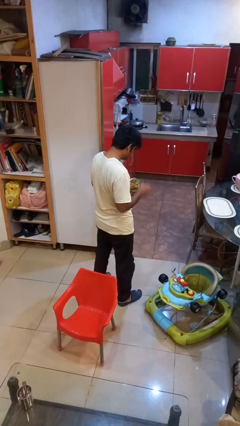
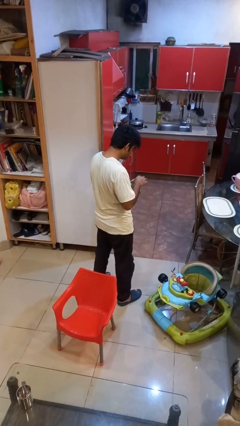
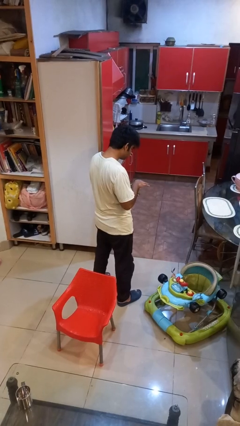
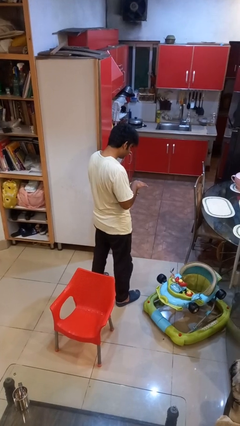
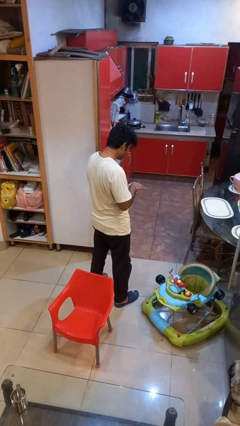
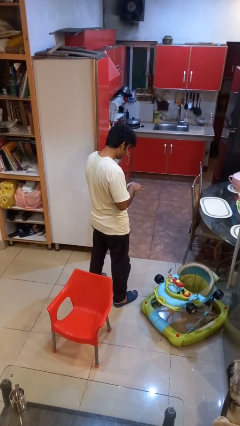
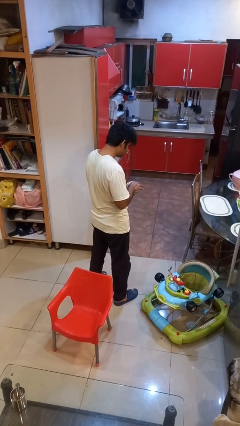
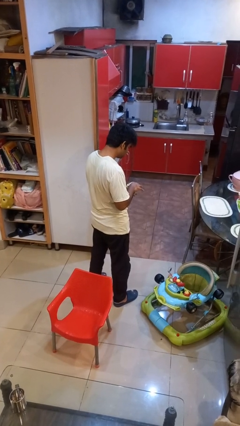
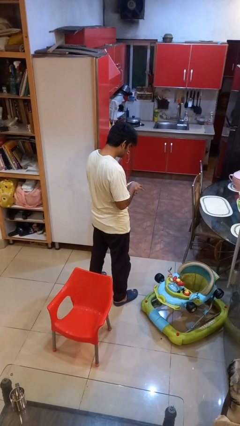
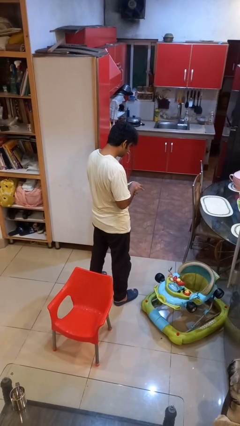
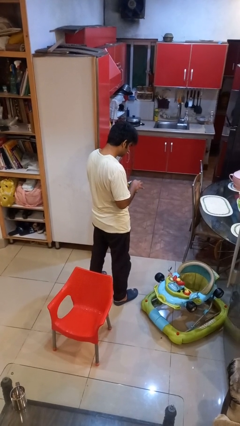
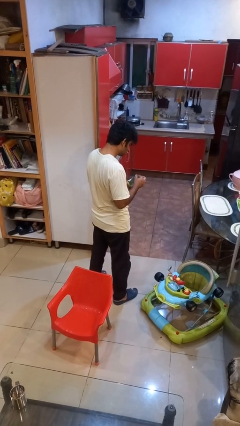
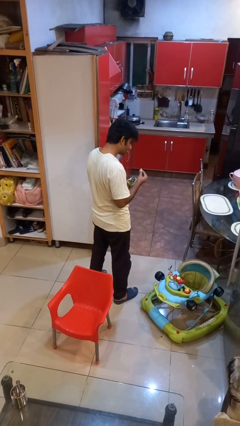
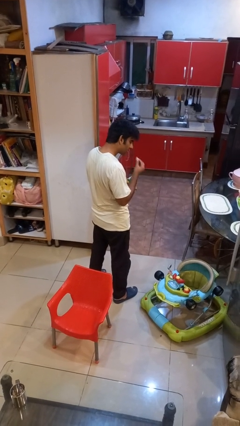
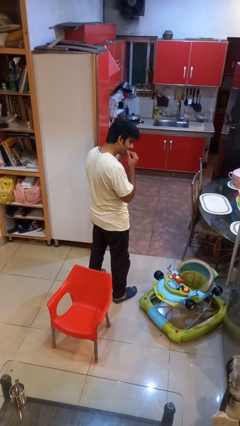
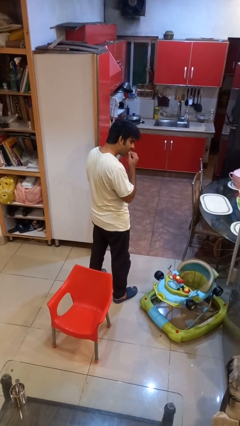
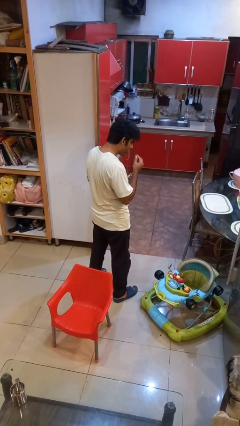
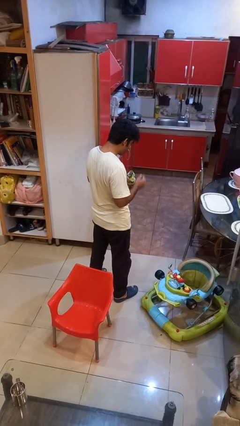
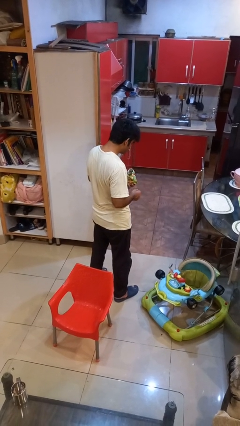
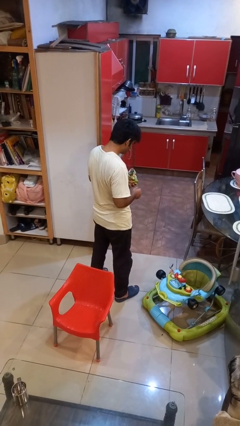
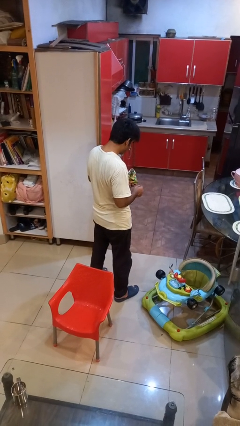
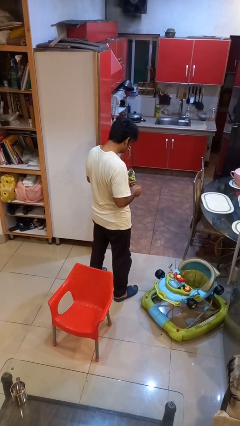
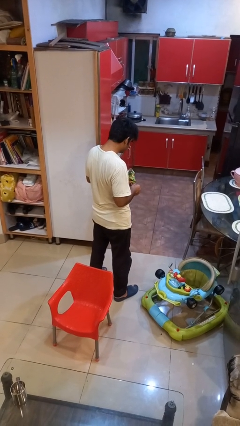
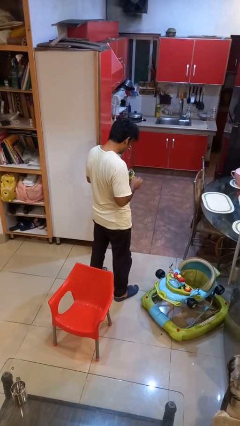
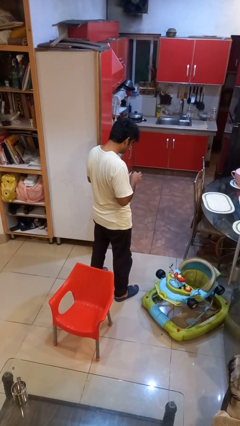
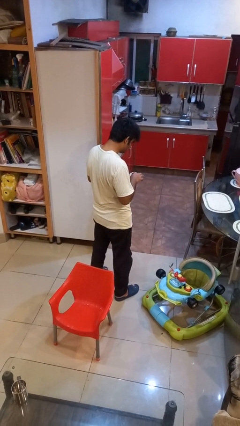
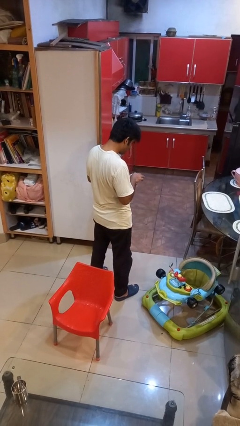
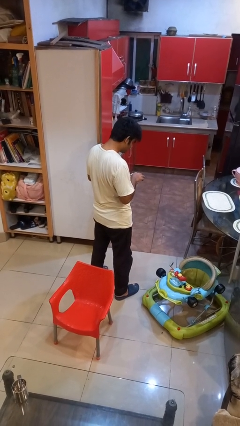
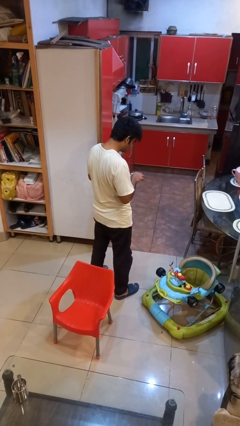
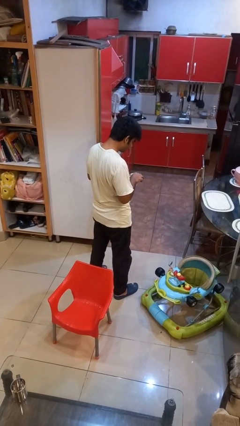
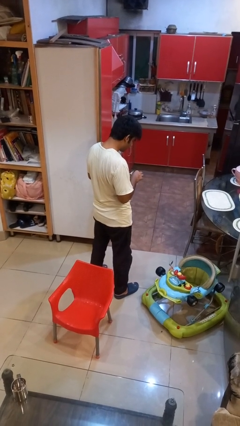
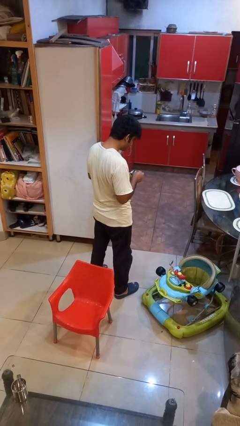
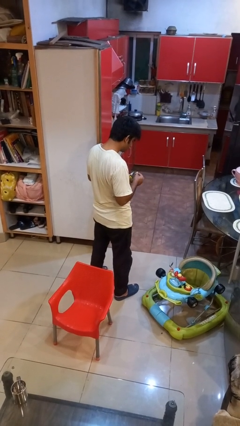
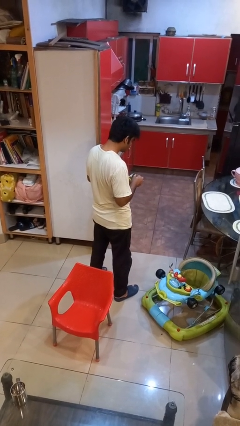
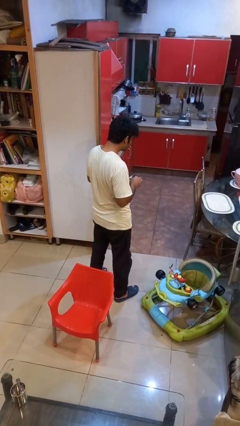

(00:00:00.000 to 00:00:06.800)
person eats snack from bag

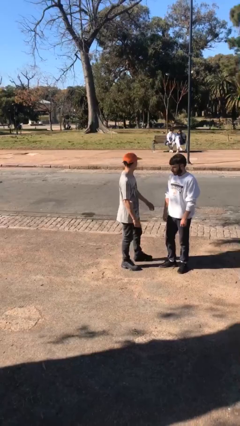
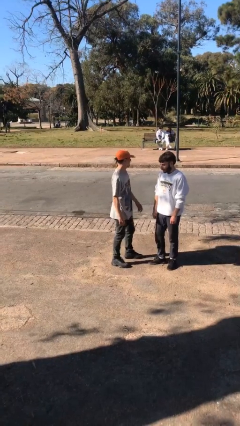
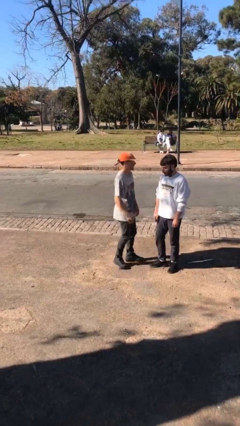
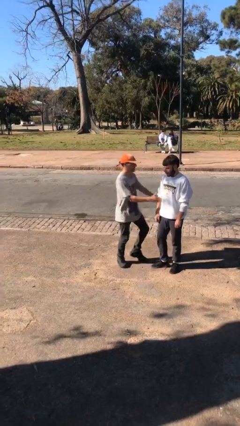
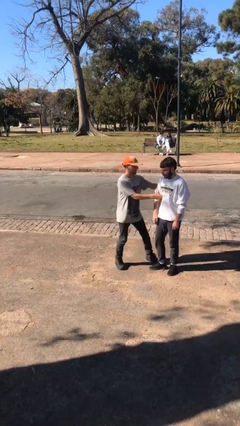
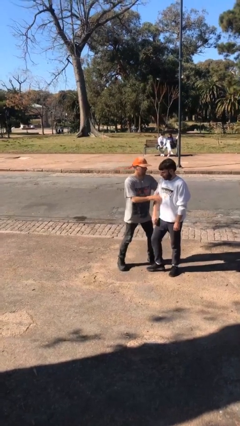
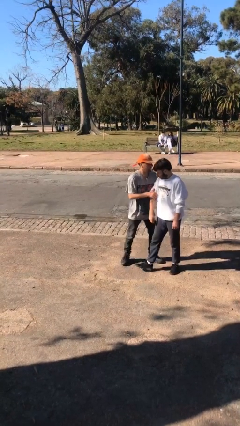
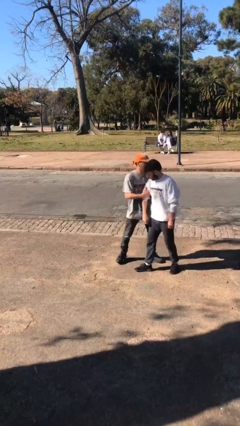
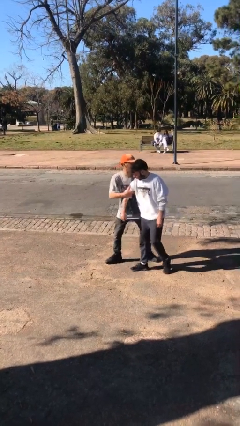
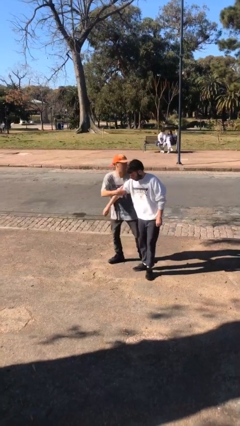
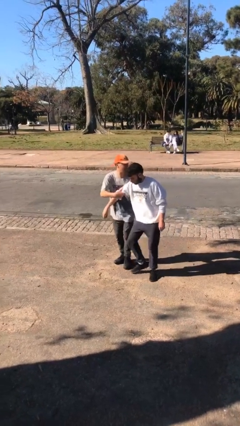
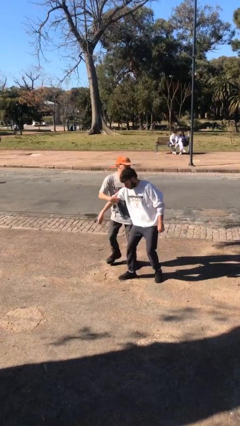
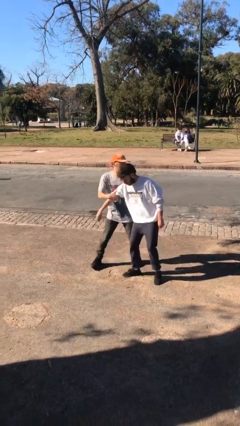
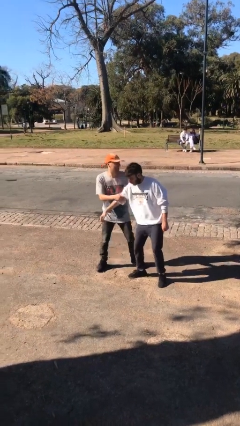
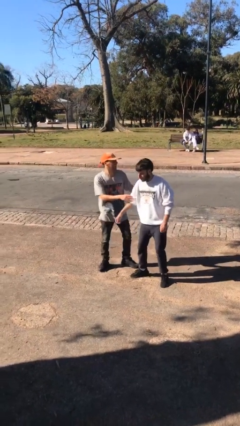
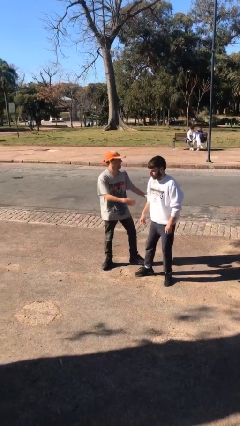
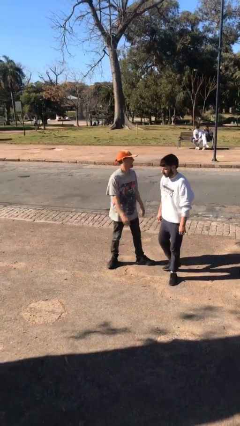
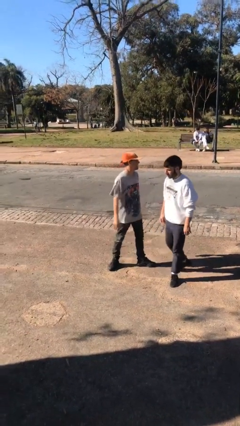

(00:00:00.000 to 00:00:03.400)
person grabs person by bicep

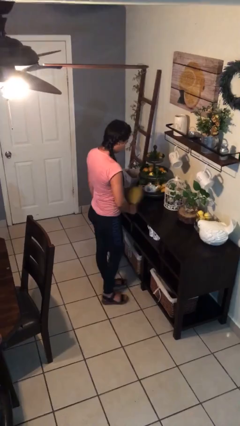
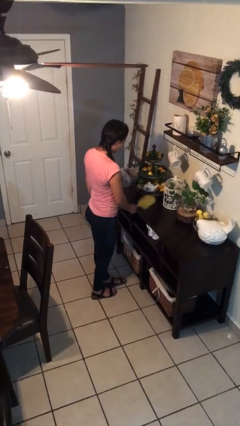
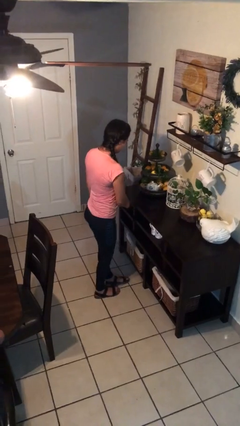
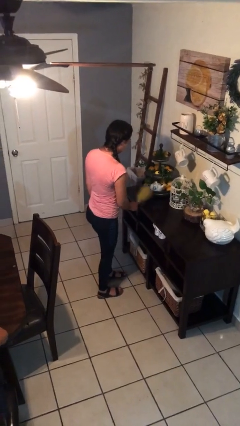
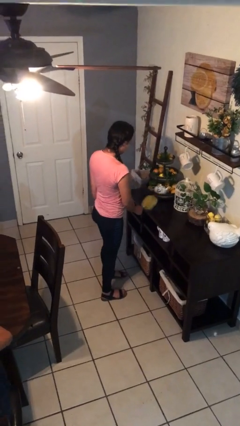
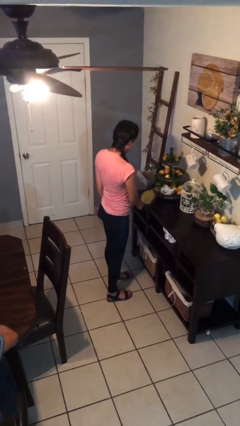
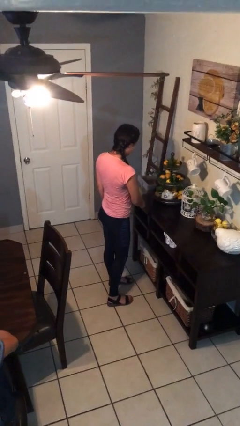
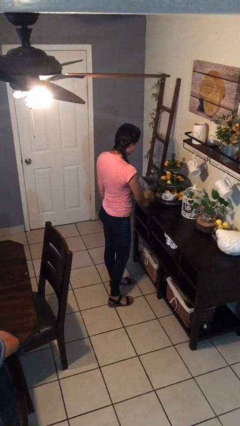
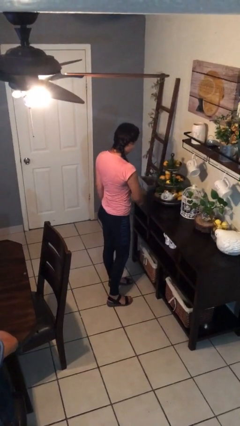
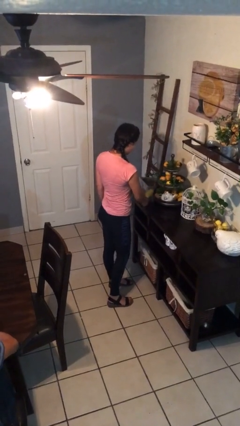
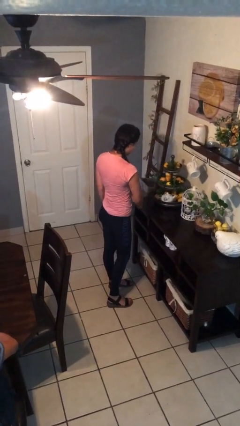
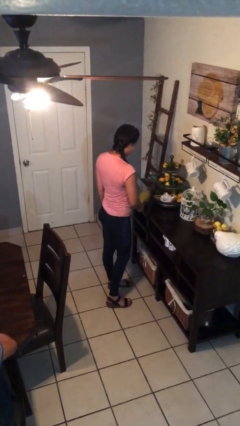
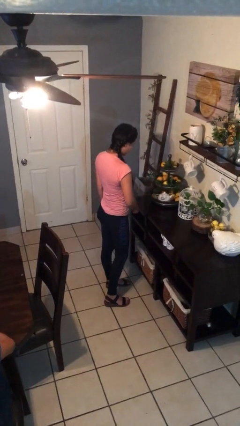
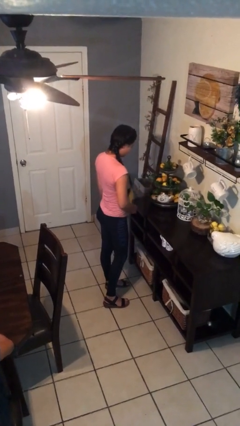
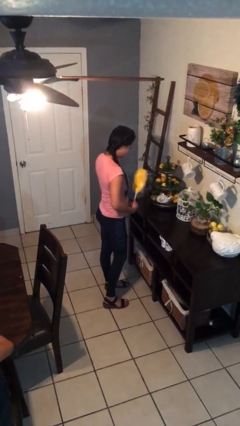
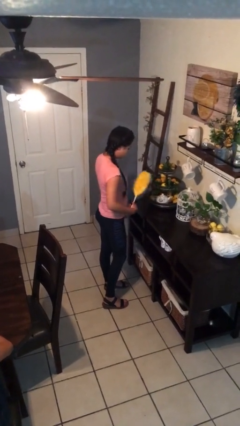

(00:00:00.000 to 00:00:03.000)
person dusts furniture

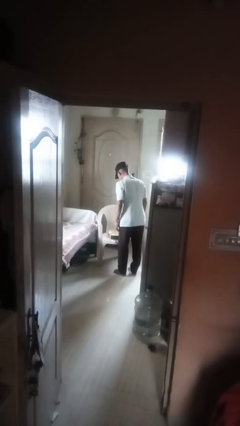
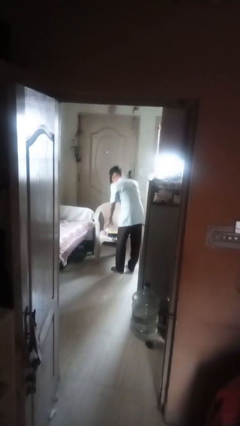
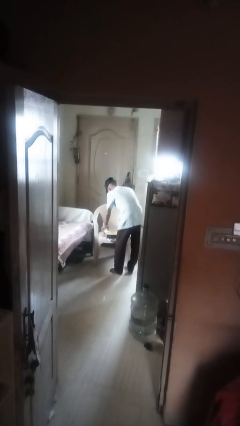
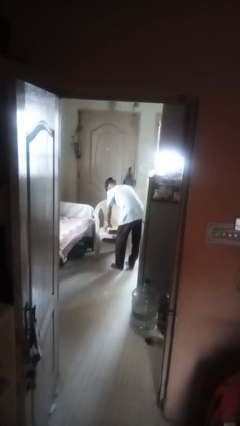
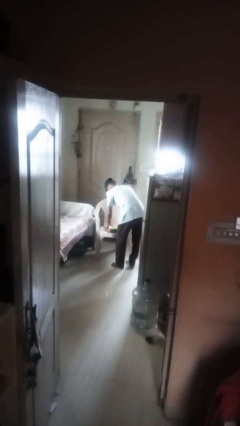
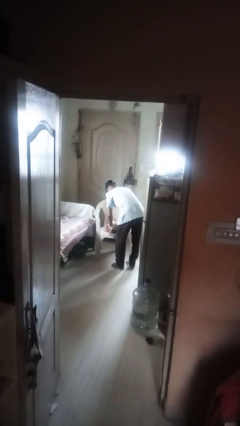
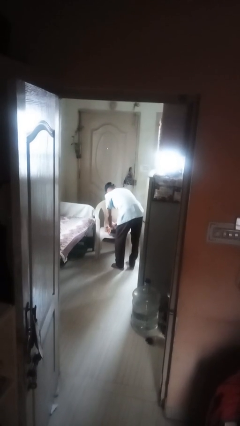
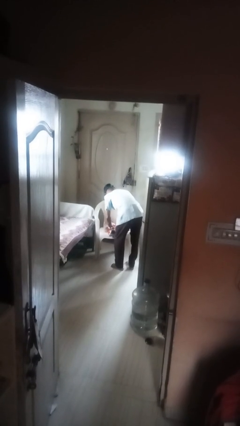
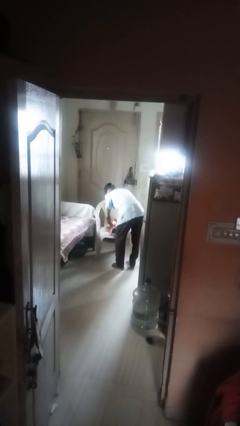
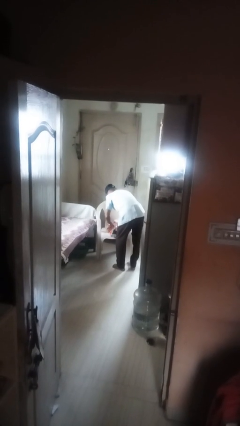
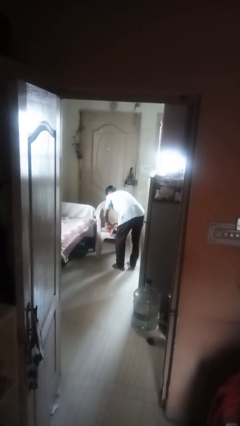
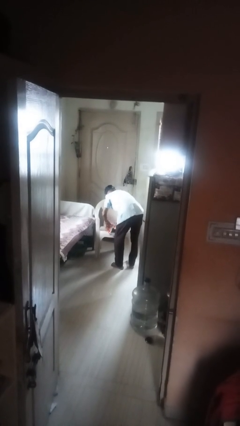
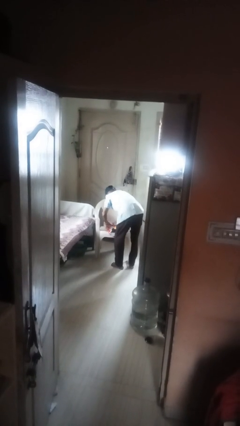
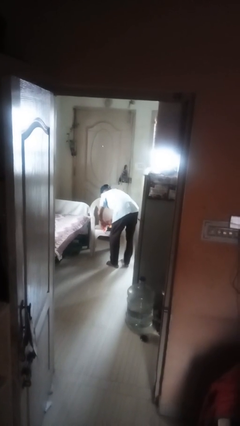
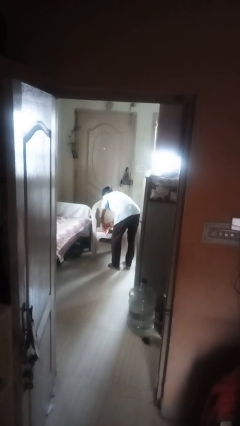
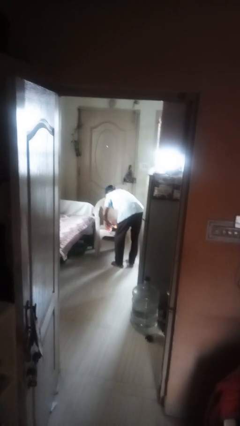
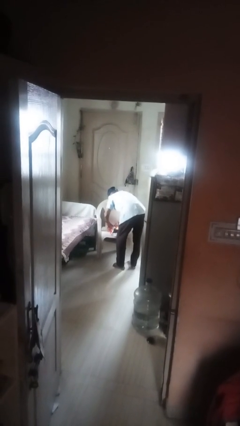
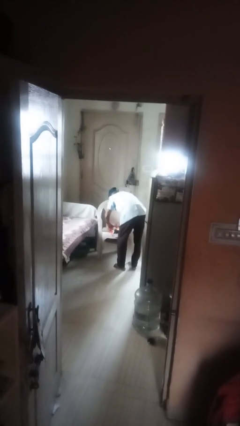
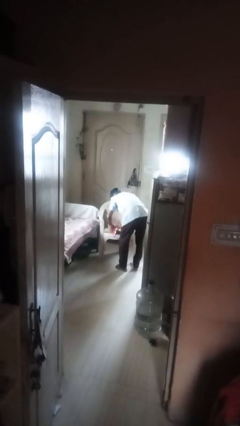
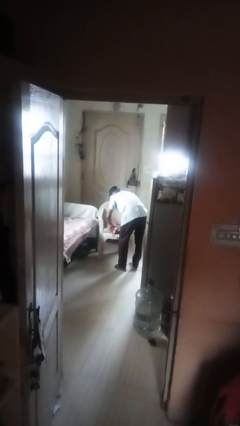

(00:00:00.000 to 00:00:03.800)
person wraps box

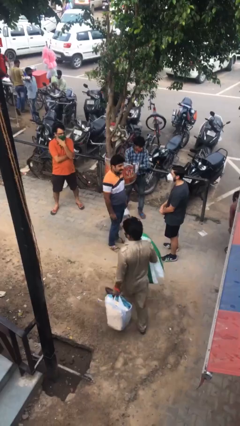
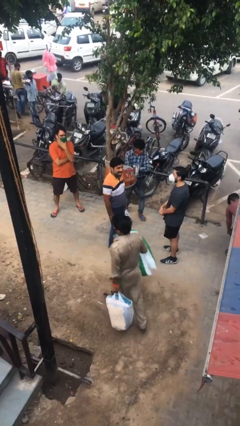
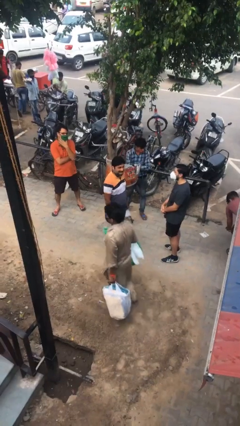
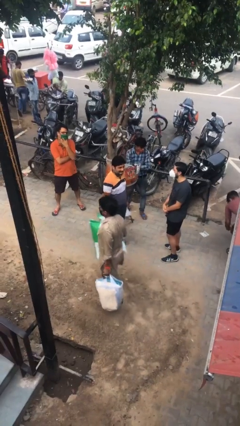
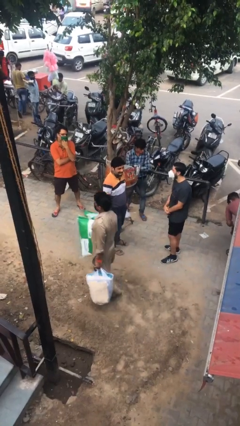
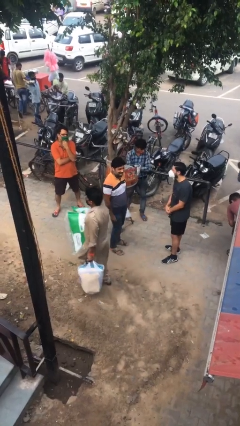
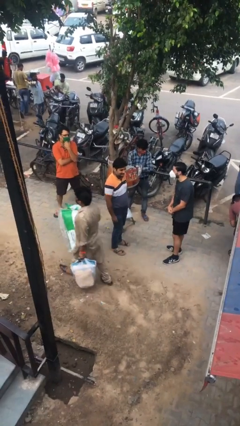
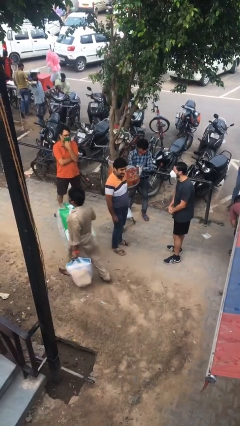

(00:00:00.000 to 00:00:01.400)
person laughs with person
